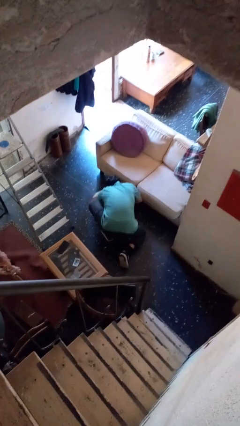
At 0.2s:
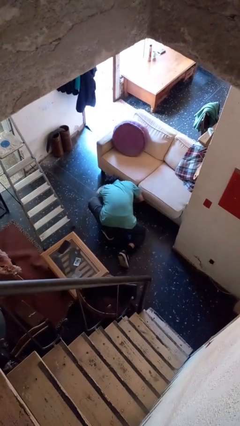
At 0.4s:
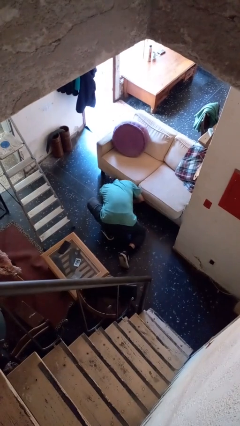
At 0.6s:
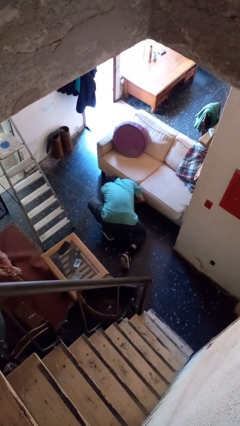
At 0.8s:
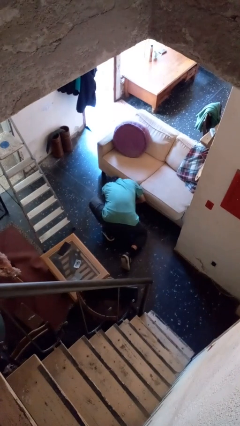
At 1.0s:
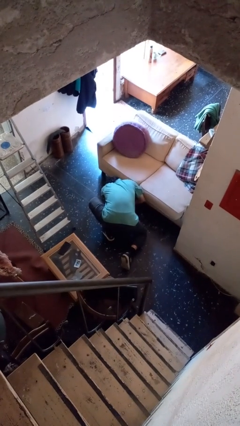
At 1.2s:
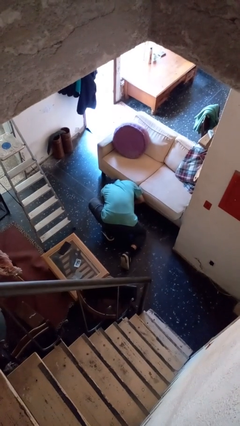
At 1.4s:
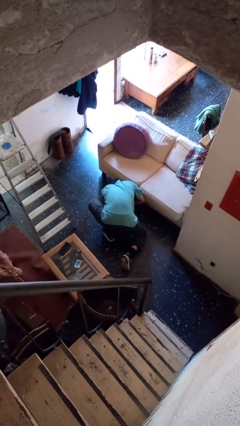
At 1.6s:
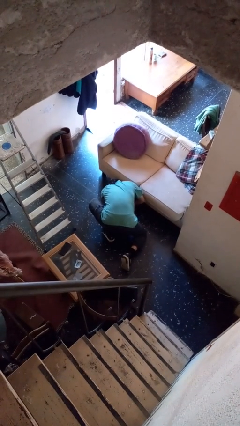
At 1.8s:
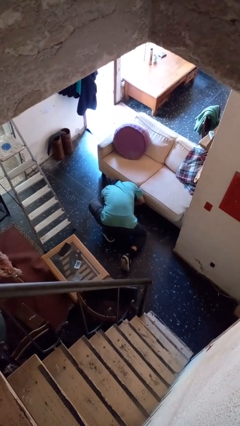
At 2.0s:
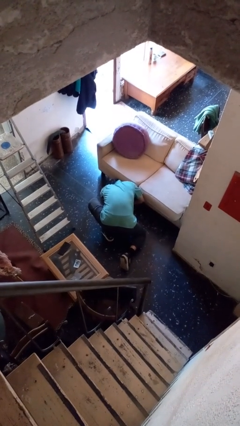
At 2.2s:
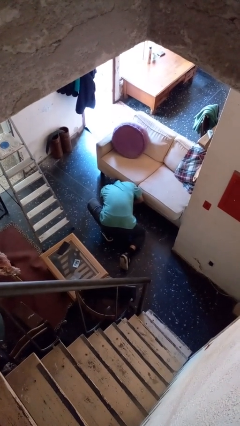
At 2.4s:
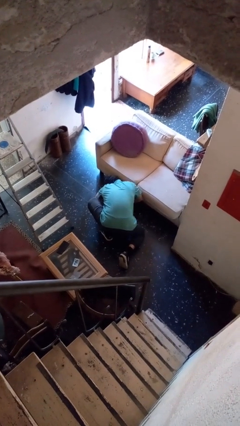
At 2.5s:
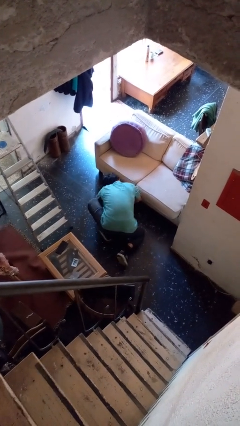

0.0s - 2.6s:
person searches under couch

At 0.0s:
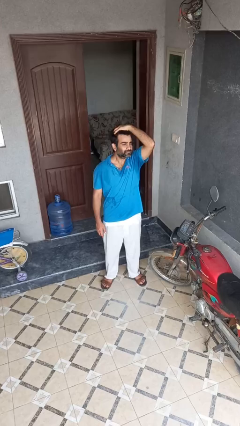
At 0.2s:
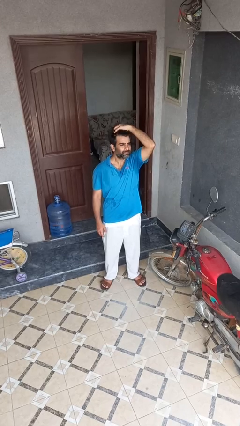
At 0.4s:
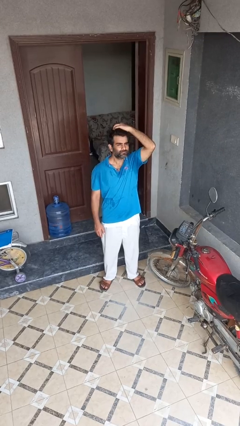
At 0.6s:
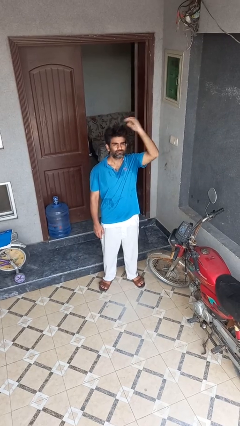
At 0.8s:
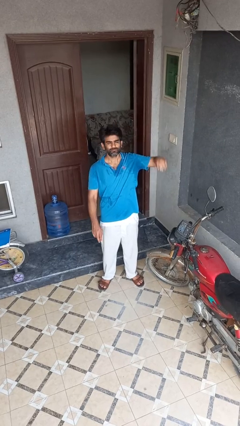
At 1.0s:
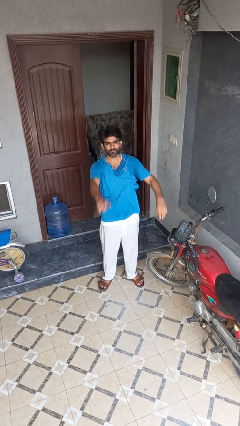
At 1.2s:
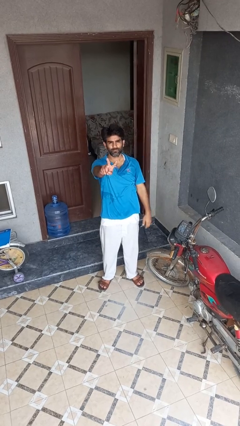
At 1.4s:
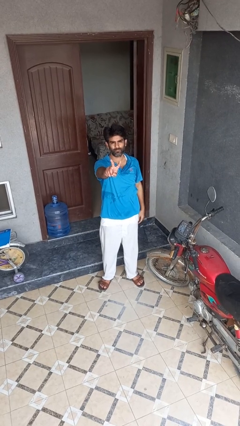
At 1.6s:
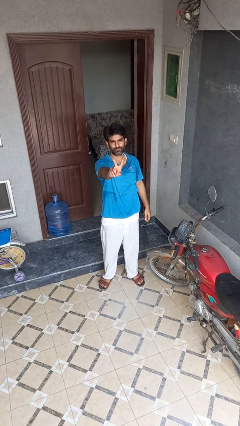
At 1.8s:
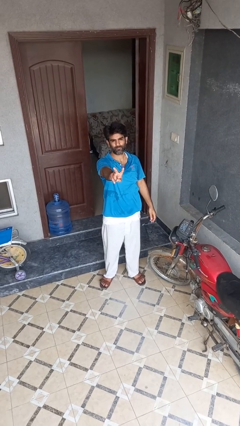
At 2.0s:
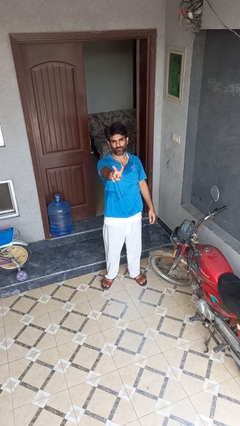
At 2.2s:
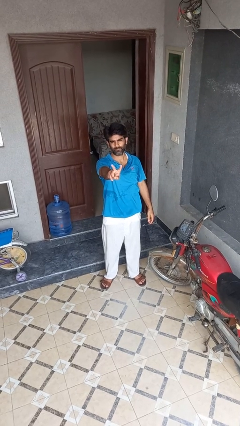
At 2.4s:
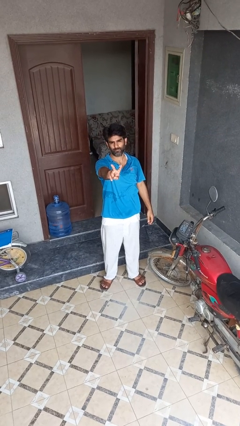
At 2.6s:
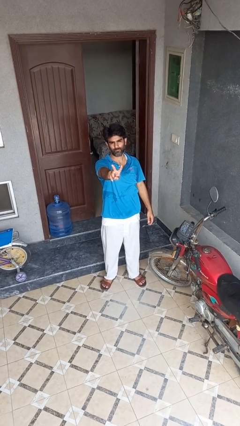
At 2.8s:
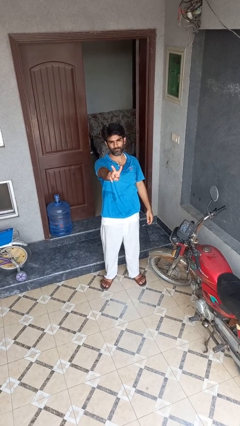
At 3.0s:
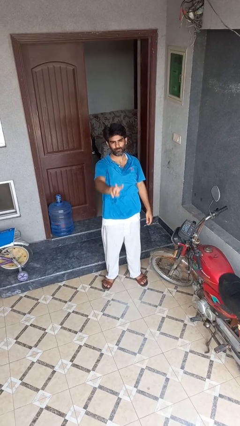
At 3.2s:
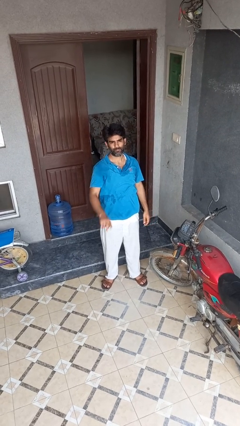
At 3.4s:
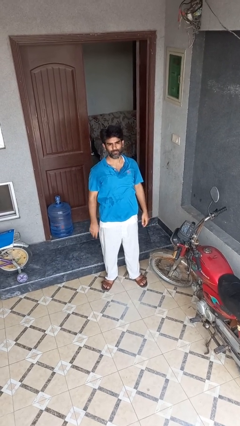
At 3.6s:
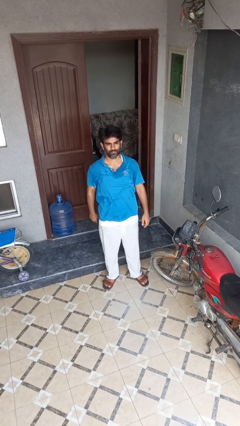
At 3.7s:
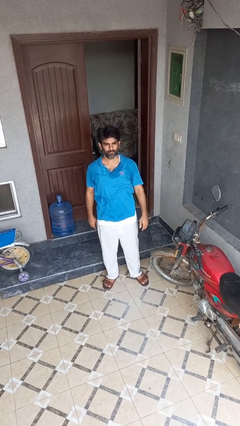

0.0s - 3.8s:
person gestures peace

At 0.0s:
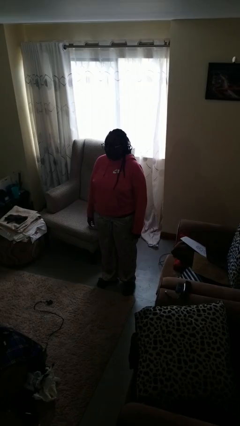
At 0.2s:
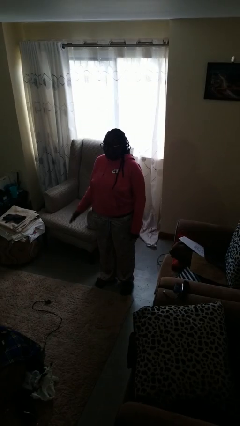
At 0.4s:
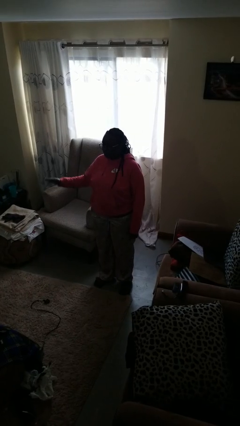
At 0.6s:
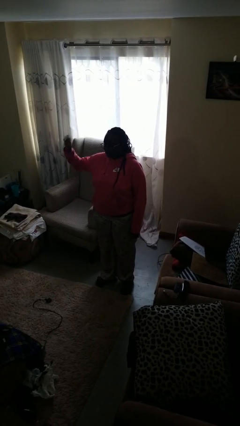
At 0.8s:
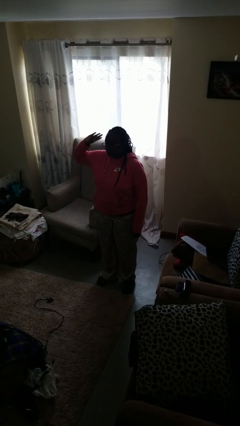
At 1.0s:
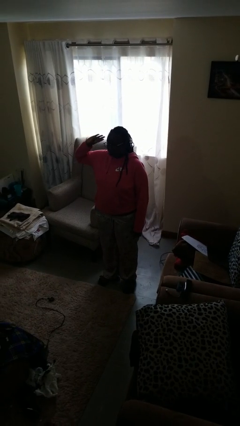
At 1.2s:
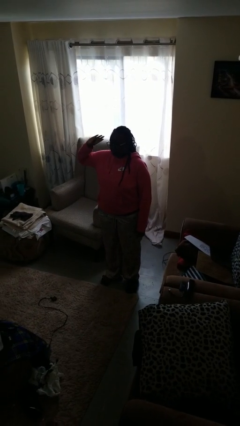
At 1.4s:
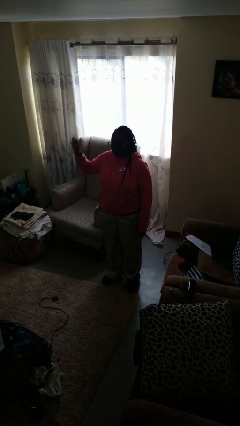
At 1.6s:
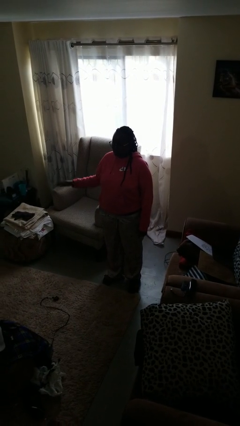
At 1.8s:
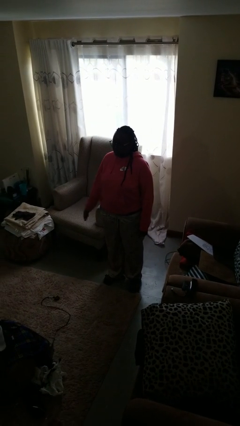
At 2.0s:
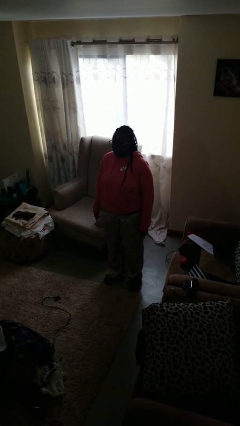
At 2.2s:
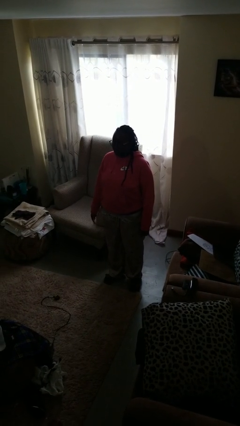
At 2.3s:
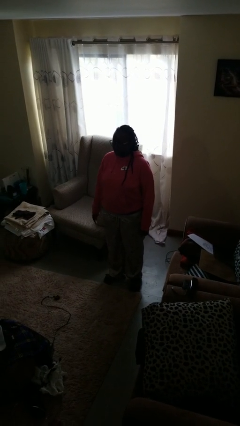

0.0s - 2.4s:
person salutes

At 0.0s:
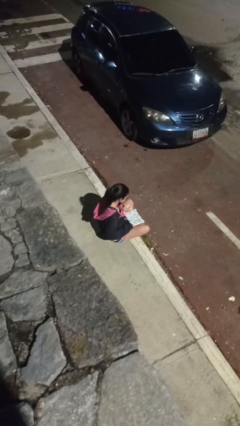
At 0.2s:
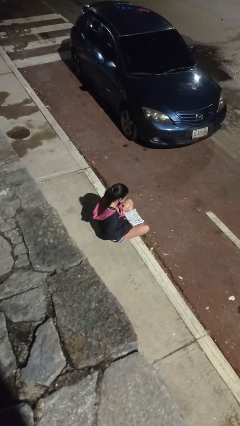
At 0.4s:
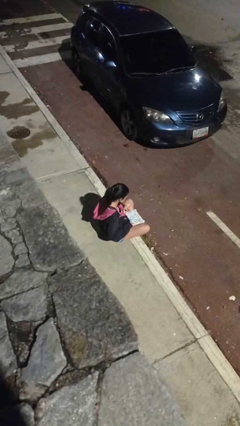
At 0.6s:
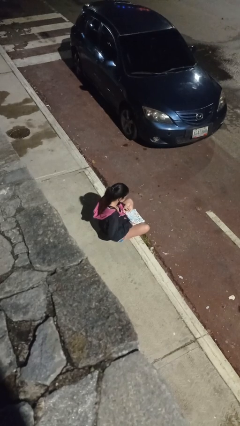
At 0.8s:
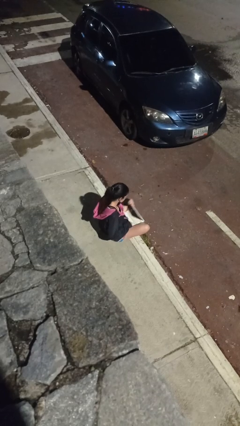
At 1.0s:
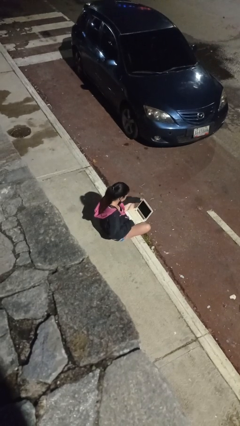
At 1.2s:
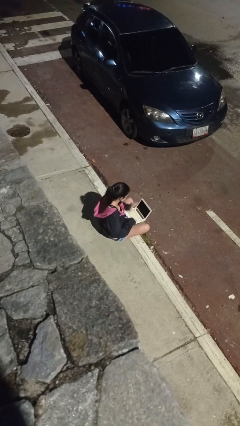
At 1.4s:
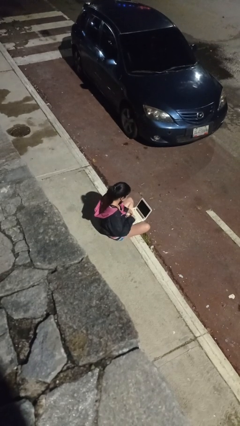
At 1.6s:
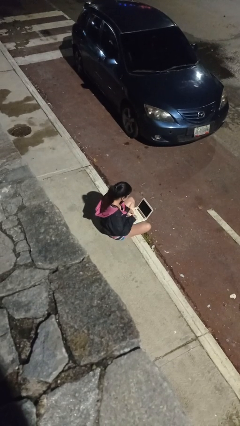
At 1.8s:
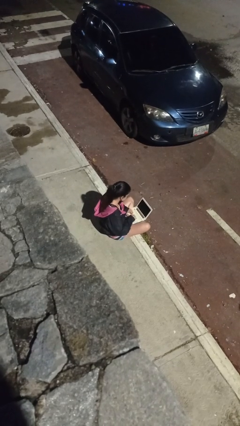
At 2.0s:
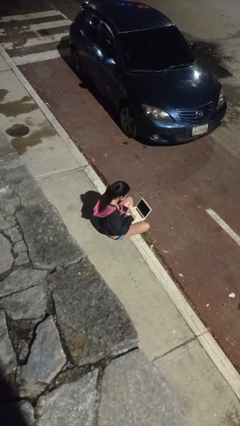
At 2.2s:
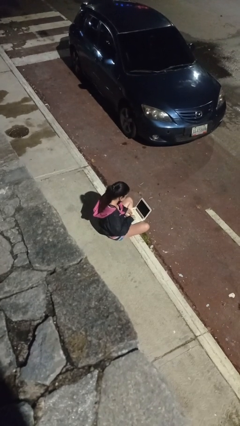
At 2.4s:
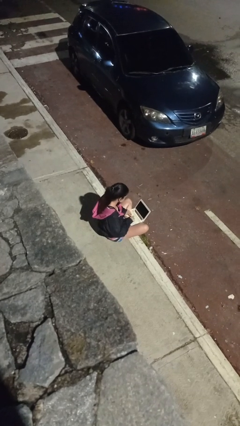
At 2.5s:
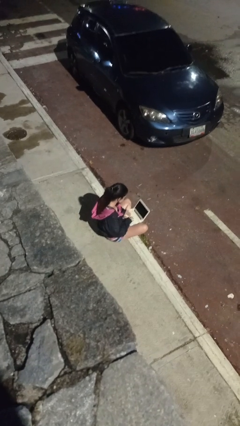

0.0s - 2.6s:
person opens laptop

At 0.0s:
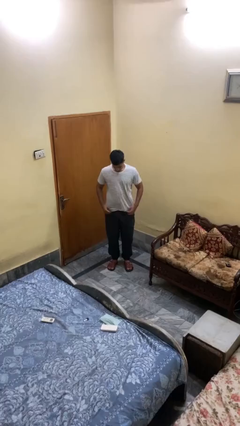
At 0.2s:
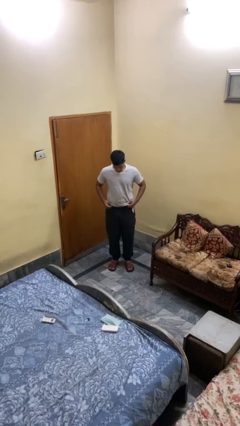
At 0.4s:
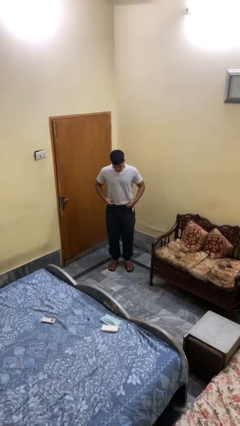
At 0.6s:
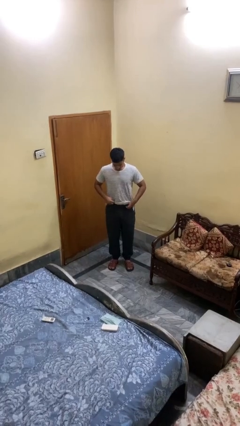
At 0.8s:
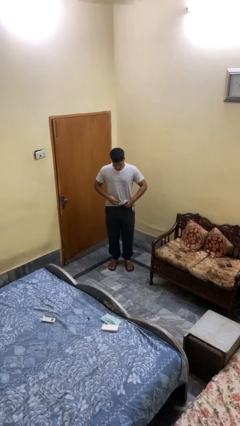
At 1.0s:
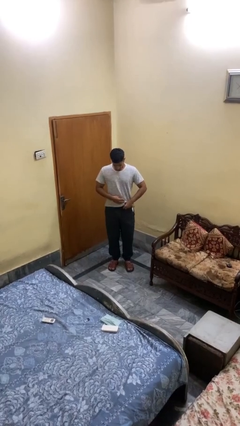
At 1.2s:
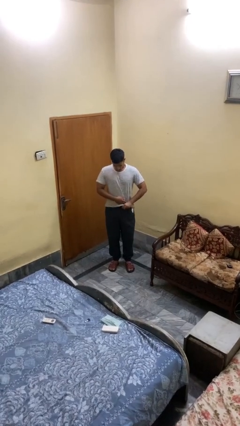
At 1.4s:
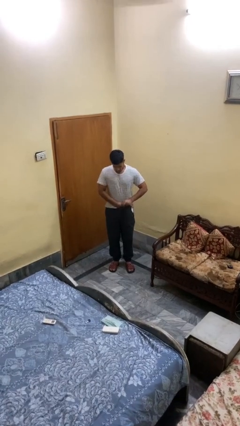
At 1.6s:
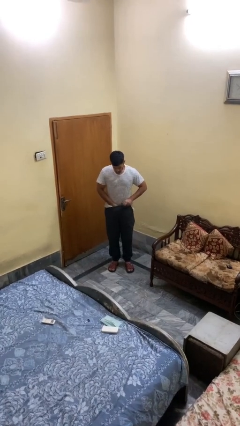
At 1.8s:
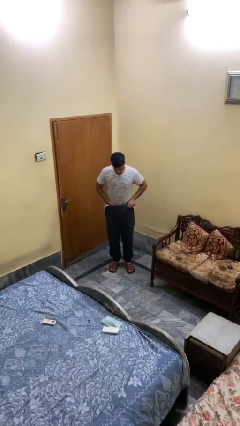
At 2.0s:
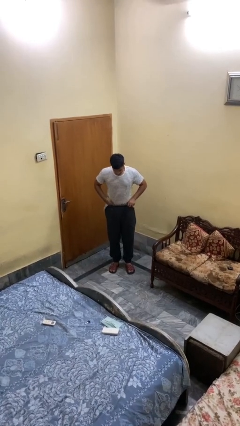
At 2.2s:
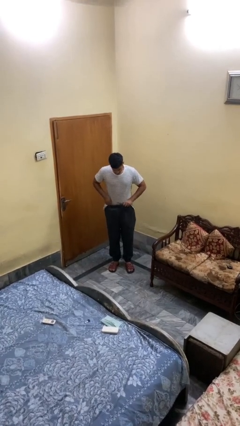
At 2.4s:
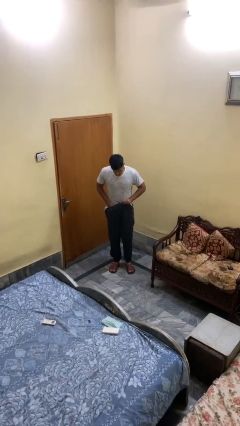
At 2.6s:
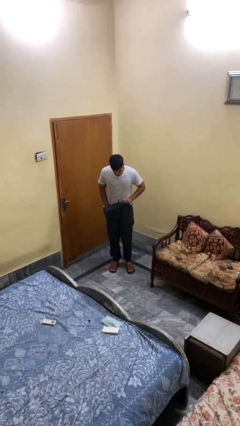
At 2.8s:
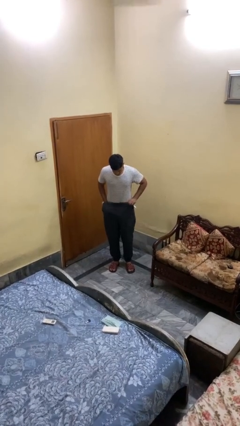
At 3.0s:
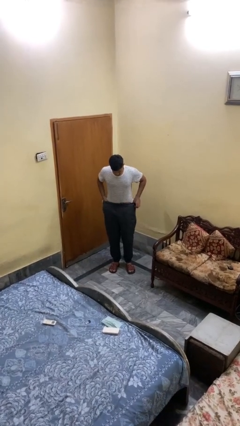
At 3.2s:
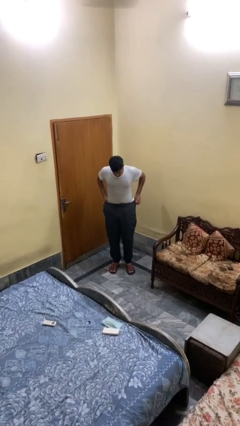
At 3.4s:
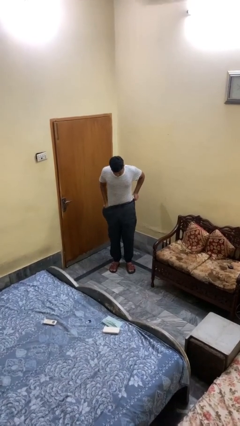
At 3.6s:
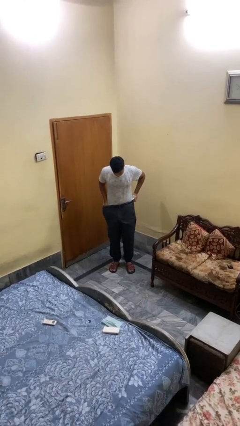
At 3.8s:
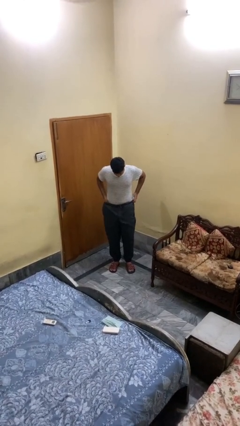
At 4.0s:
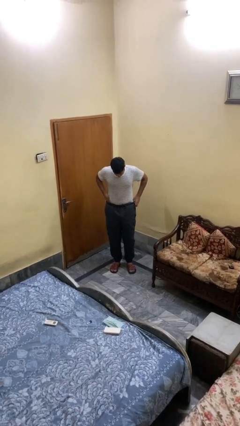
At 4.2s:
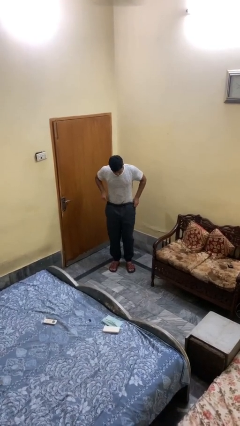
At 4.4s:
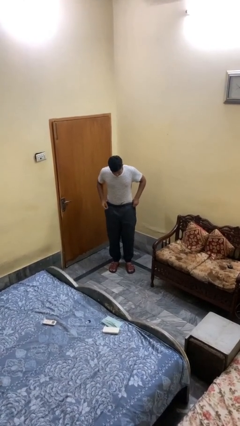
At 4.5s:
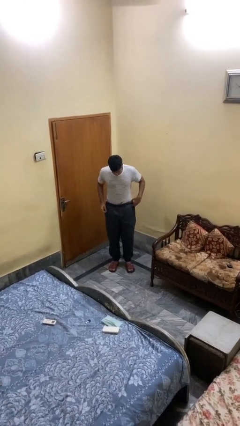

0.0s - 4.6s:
person tucks in shirt

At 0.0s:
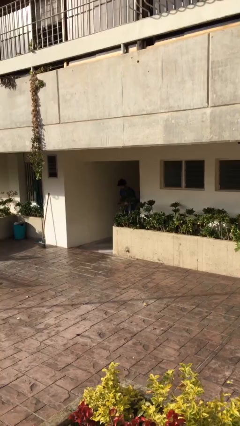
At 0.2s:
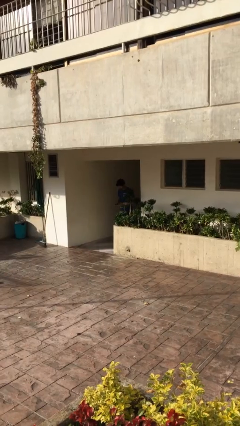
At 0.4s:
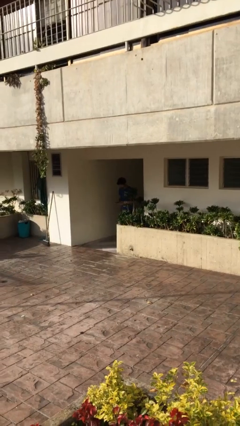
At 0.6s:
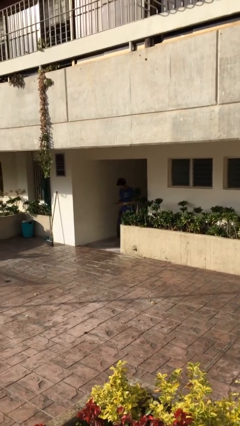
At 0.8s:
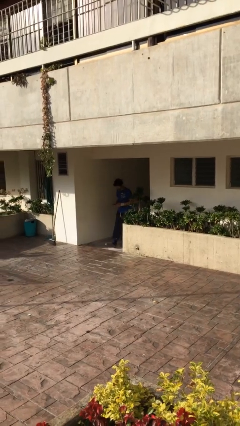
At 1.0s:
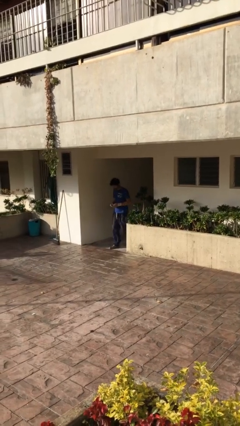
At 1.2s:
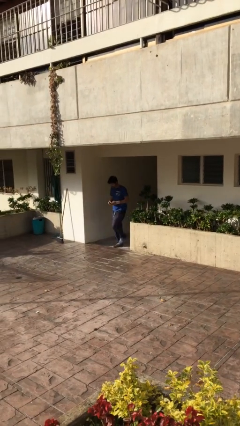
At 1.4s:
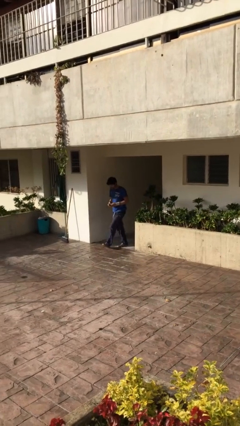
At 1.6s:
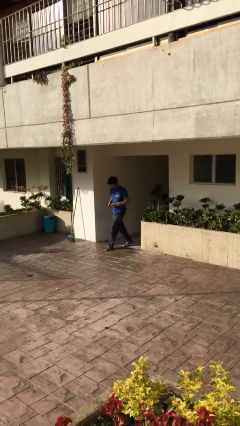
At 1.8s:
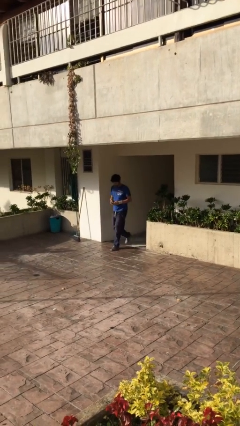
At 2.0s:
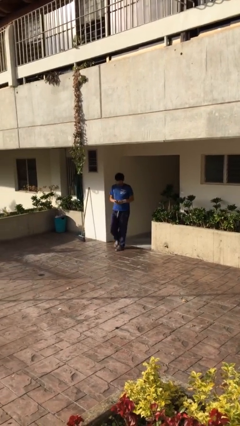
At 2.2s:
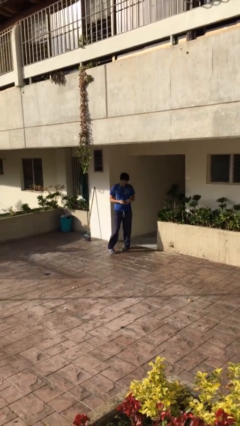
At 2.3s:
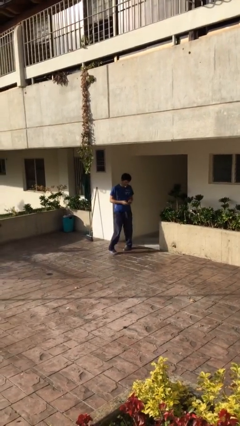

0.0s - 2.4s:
person enters scene through structure
